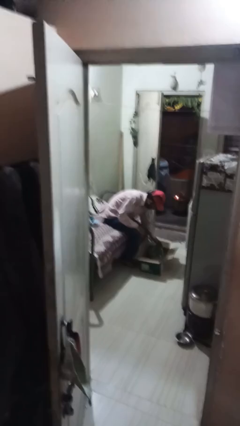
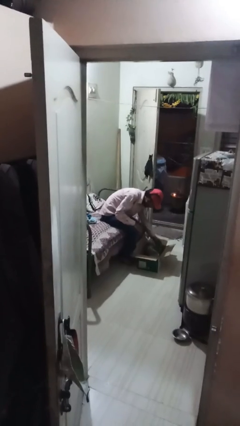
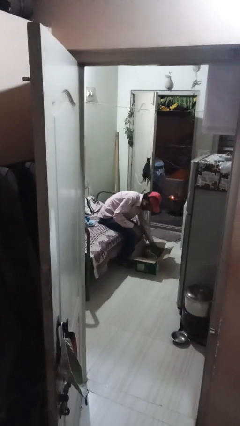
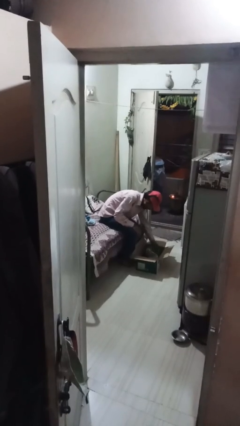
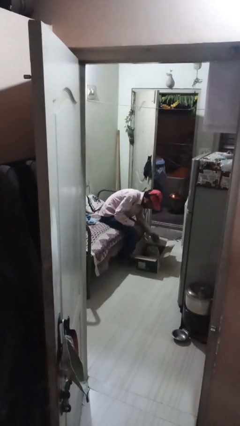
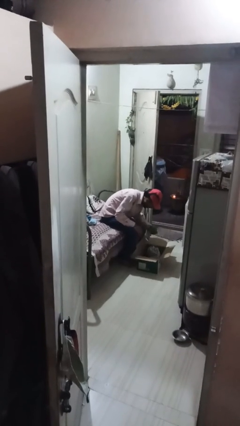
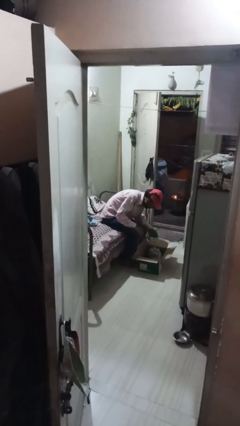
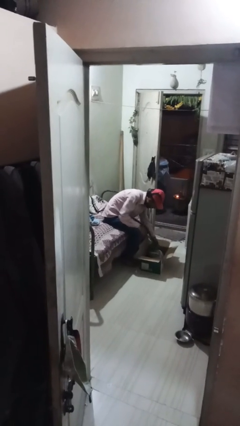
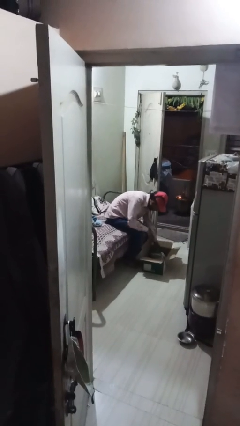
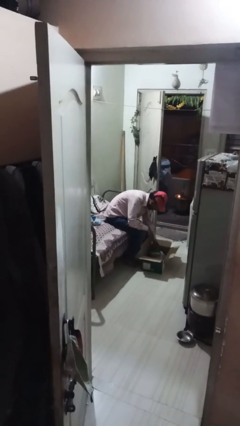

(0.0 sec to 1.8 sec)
person searches in box

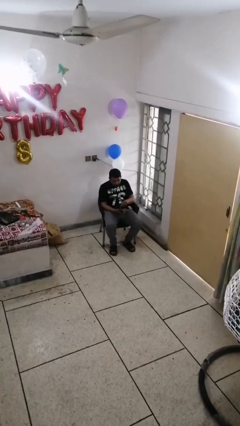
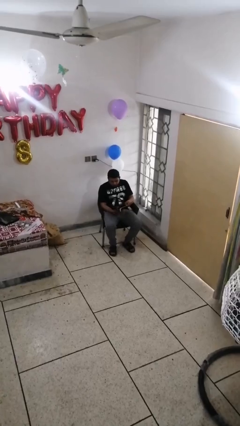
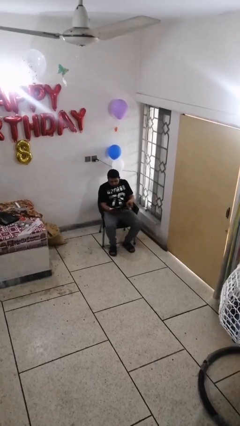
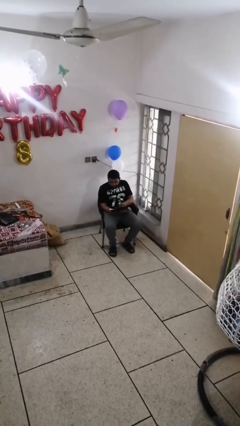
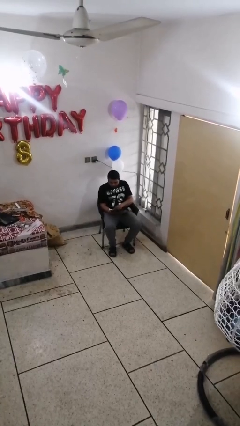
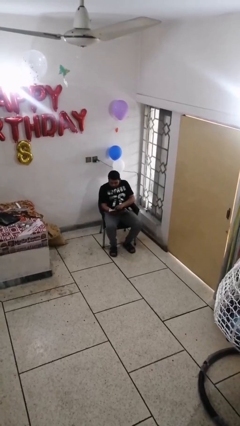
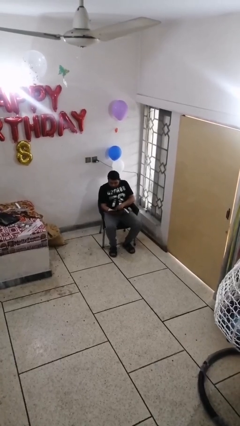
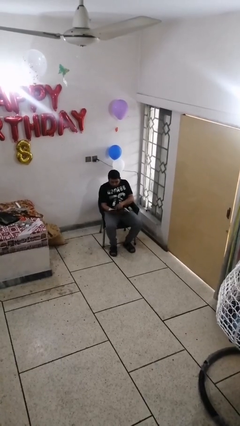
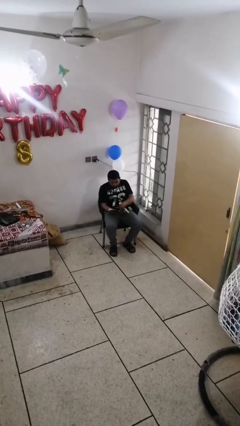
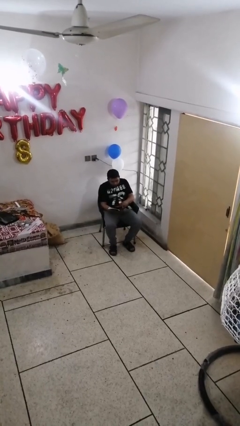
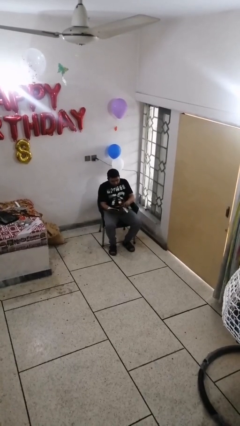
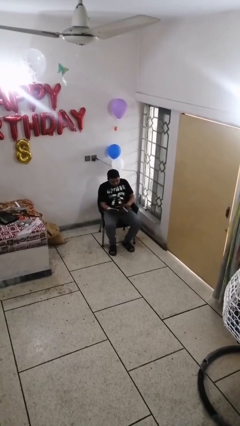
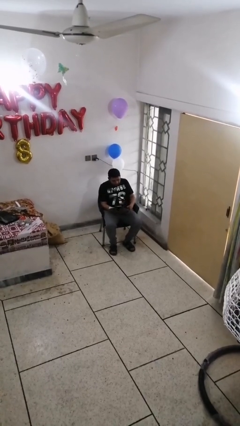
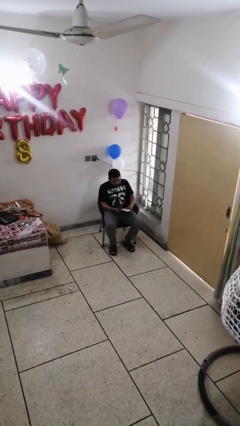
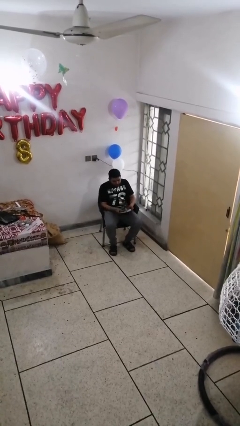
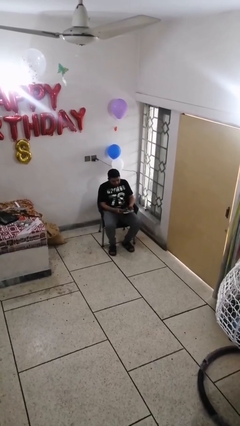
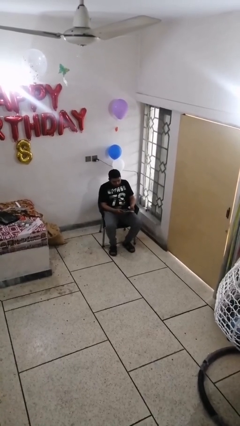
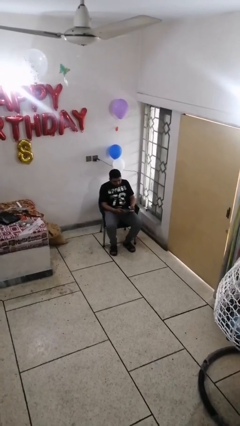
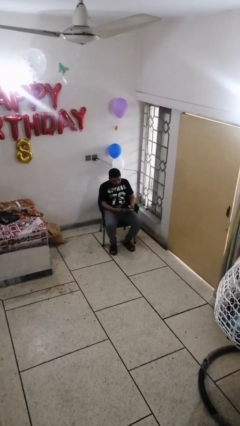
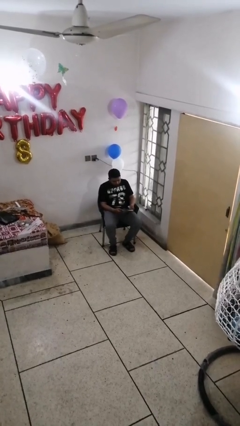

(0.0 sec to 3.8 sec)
person reads document

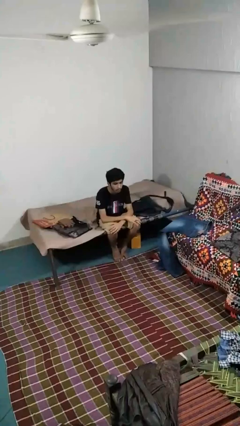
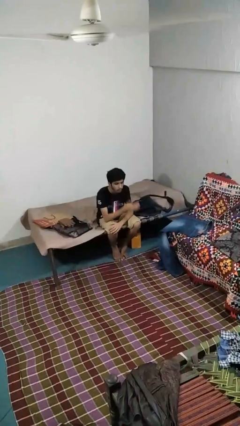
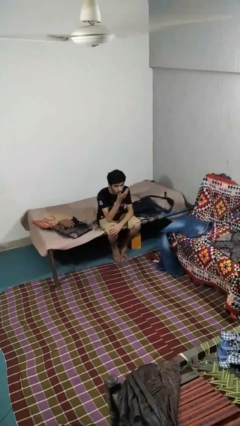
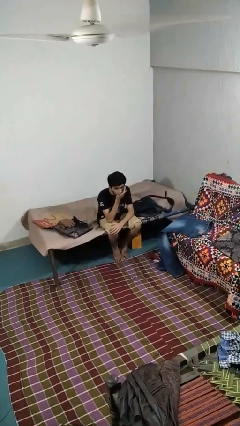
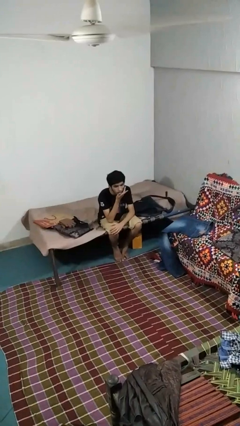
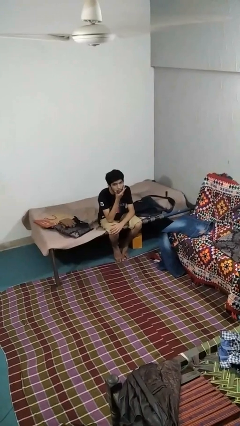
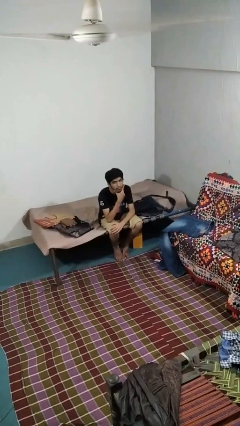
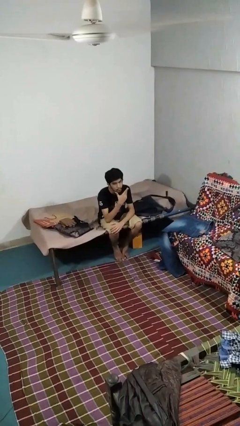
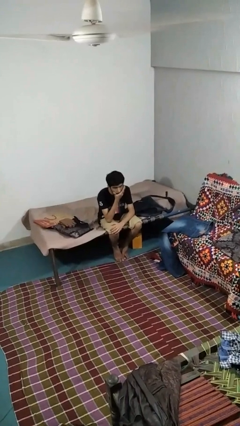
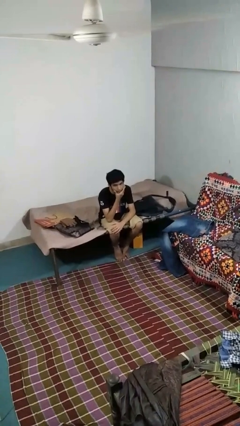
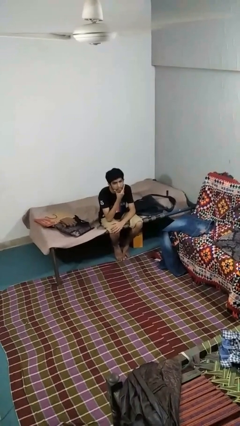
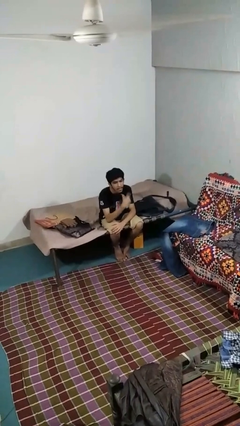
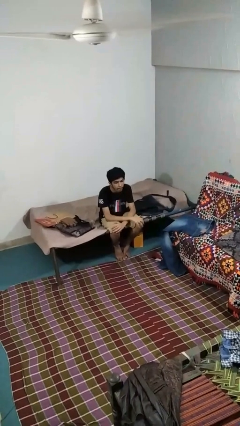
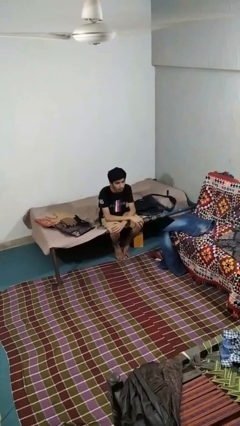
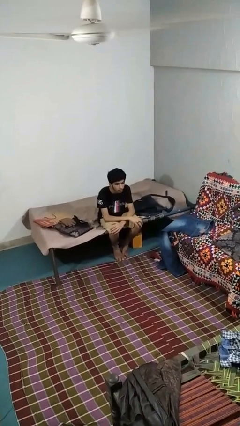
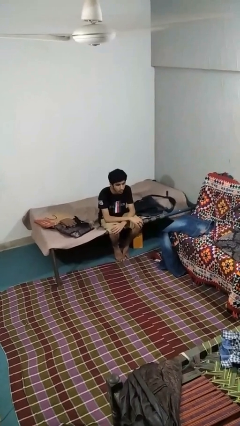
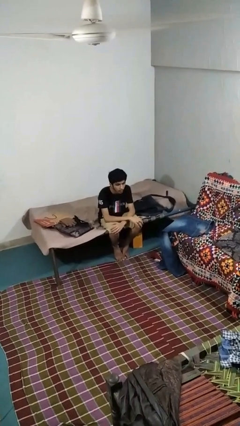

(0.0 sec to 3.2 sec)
person strokes chin

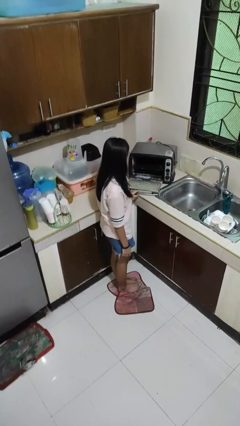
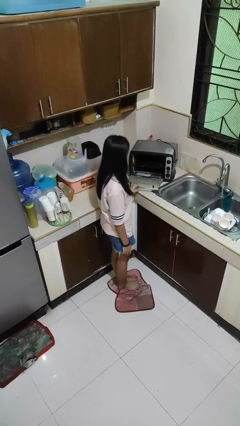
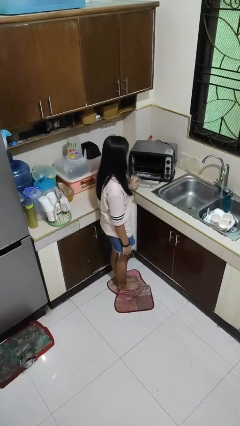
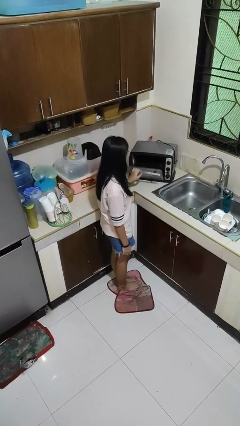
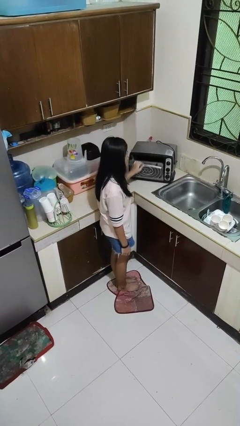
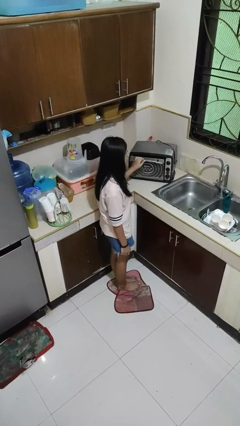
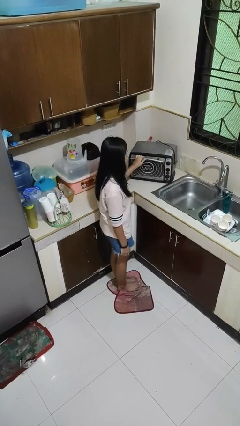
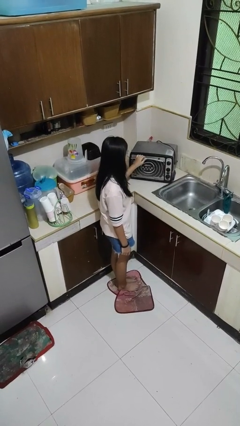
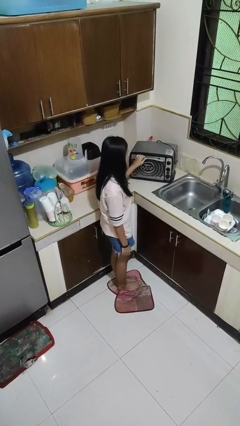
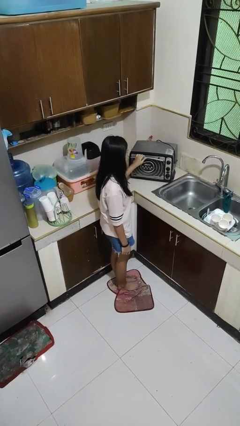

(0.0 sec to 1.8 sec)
person closes microwave

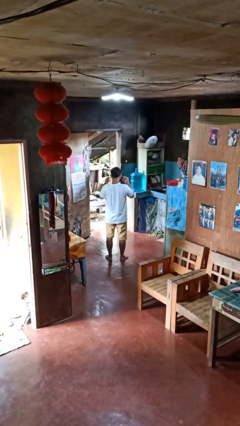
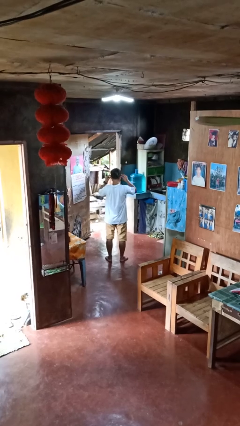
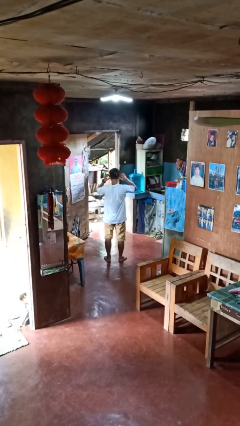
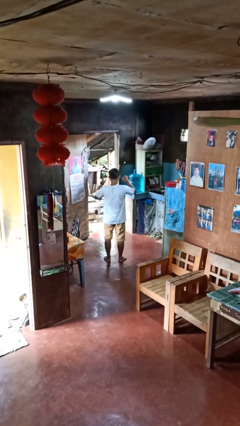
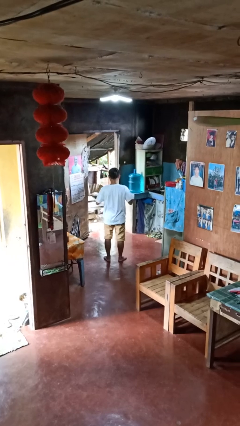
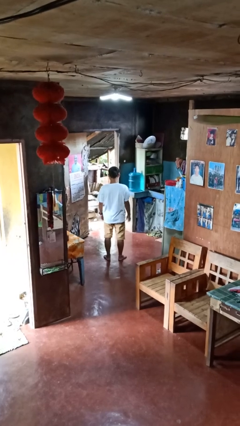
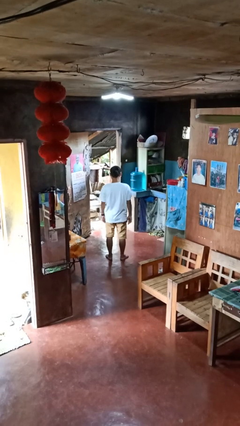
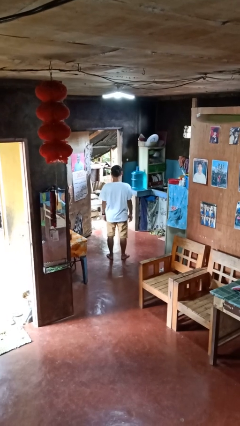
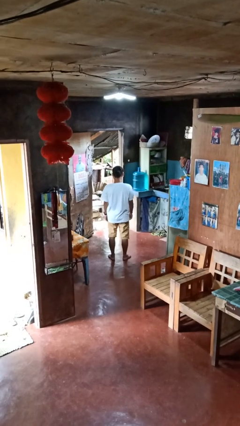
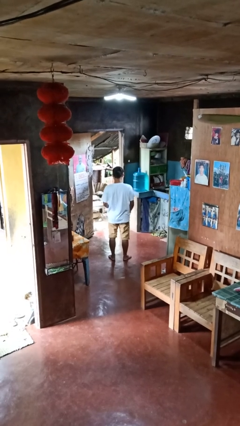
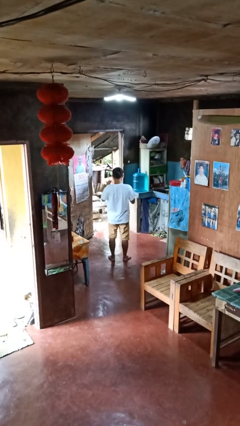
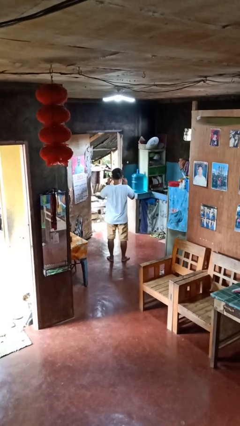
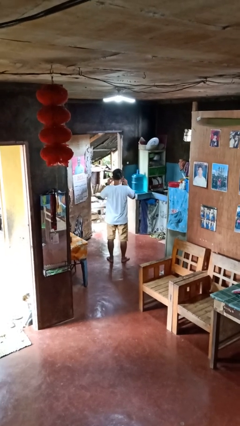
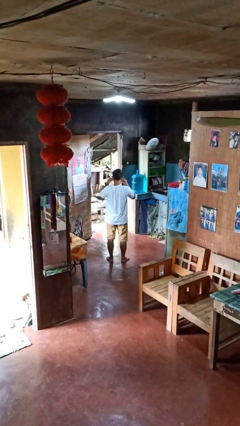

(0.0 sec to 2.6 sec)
person puts on facemask

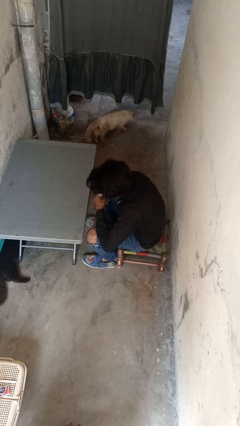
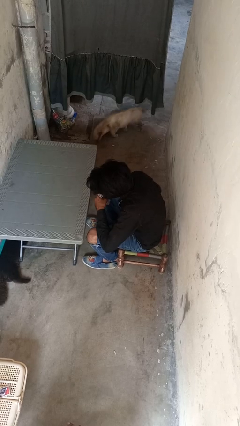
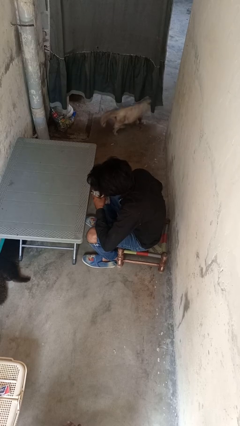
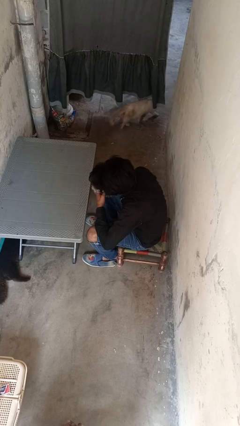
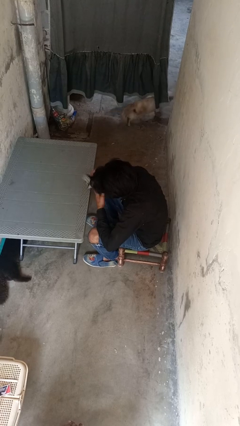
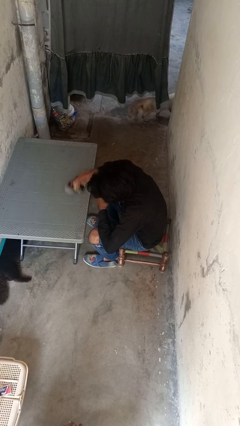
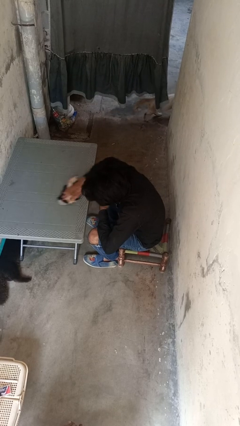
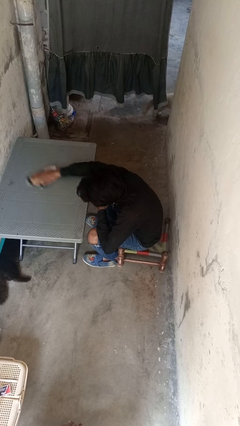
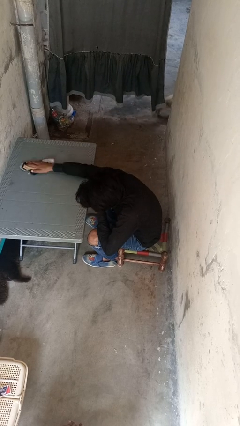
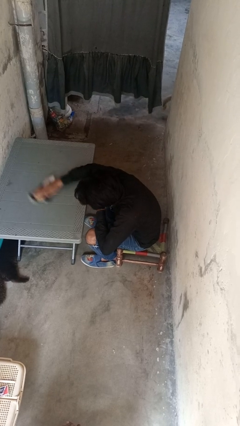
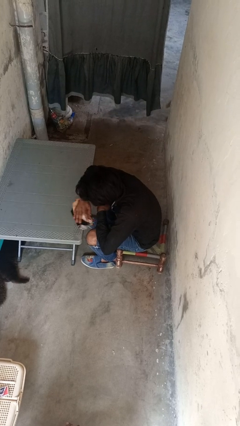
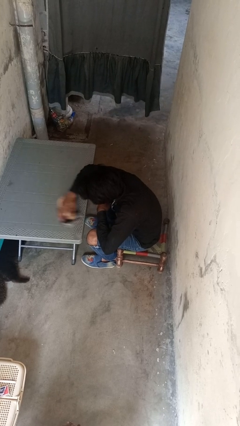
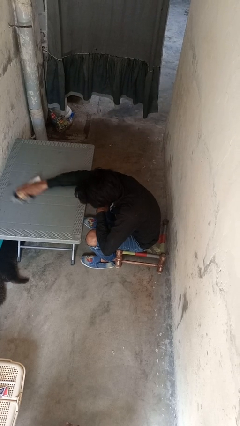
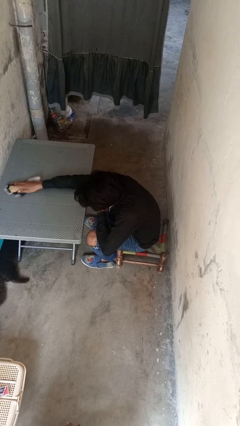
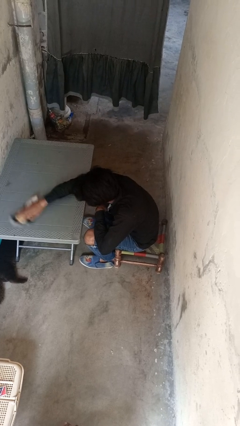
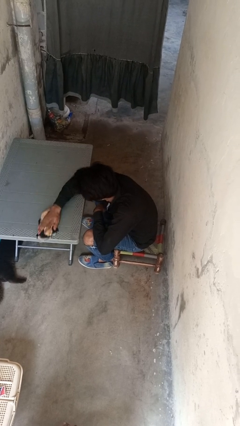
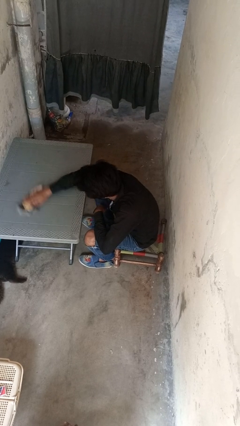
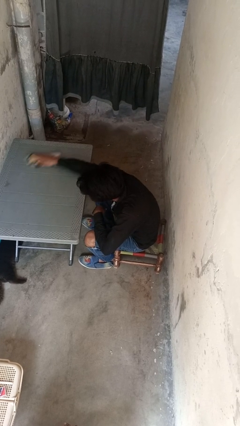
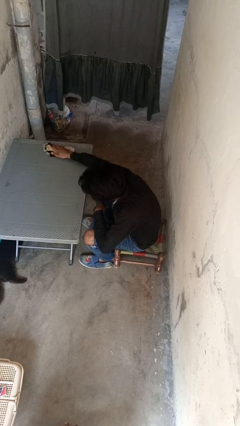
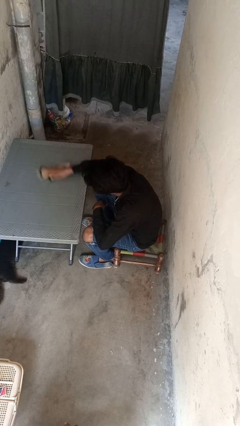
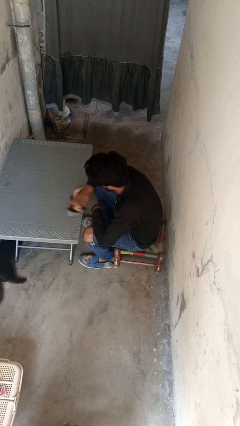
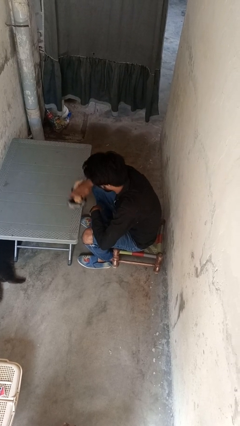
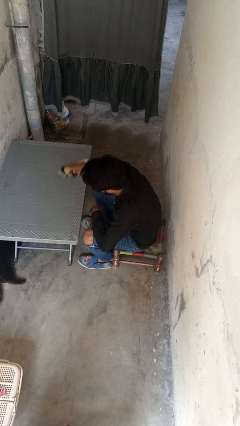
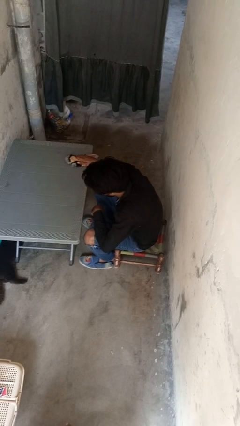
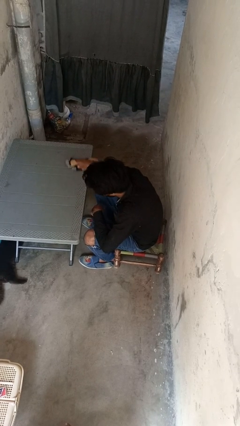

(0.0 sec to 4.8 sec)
person cleans table with rag
